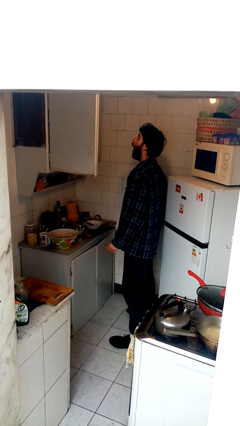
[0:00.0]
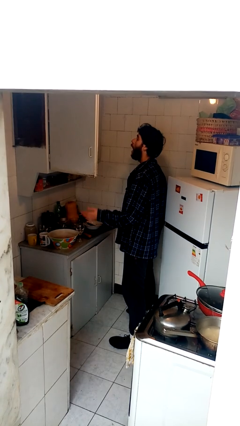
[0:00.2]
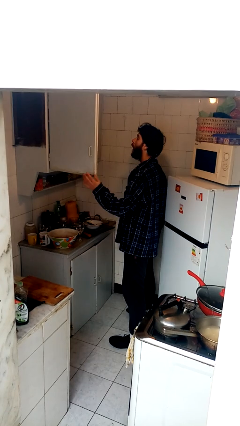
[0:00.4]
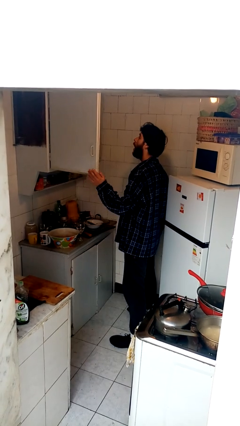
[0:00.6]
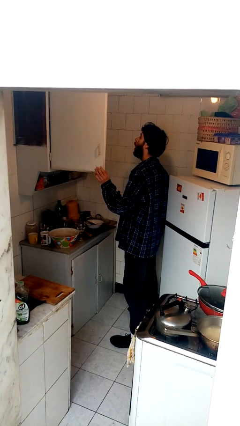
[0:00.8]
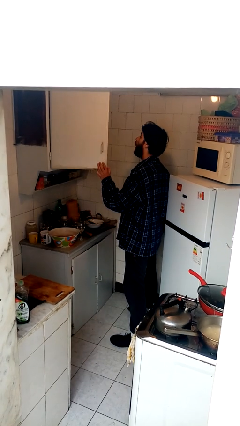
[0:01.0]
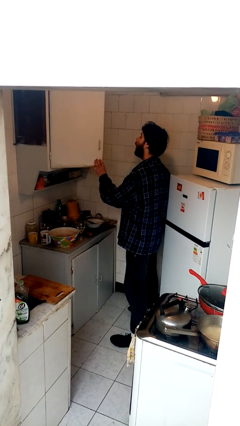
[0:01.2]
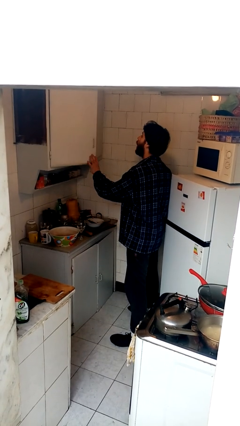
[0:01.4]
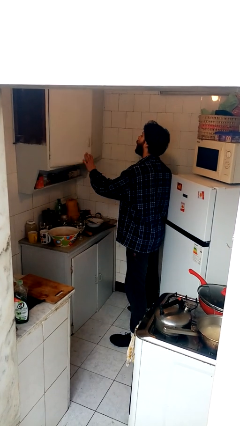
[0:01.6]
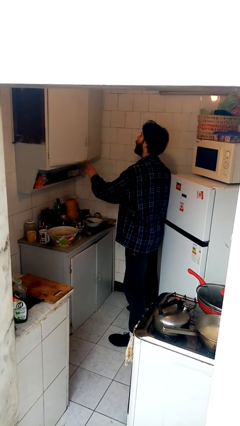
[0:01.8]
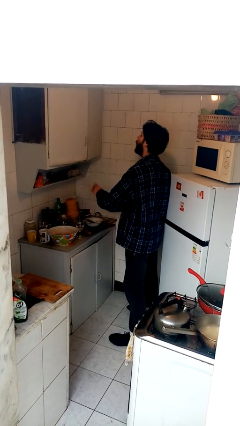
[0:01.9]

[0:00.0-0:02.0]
person closes cabinet

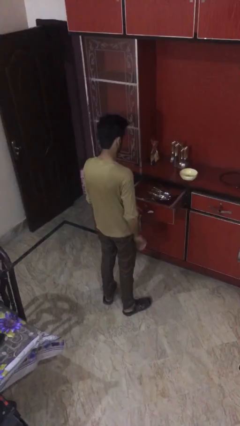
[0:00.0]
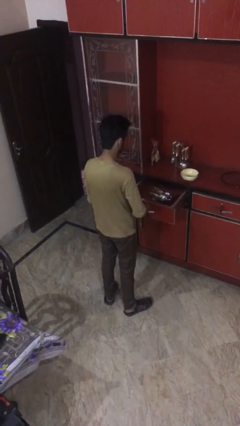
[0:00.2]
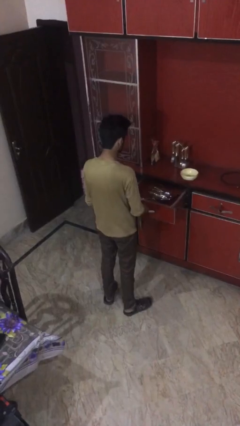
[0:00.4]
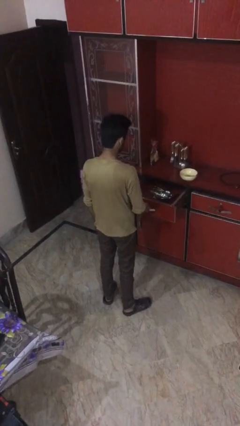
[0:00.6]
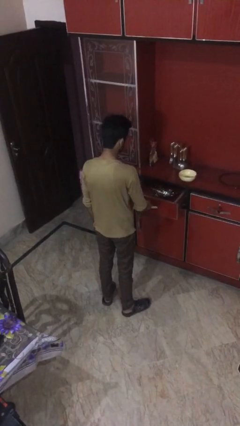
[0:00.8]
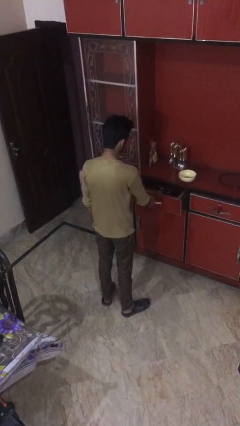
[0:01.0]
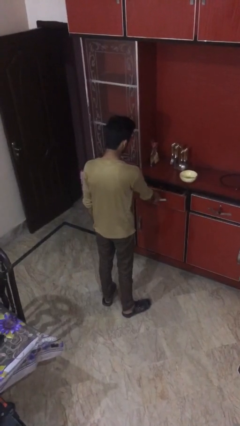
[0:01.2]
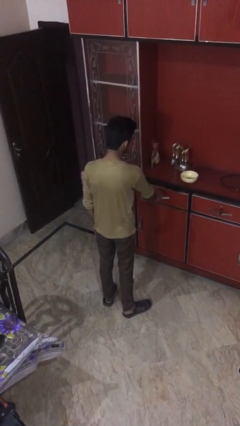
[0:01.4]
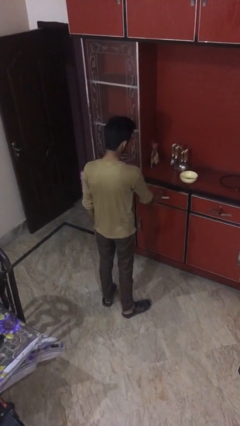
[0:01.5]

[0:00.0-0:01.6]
person closes kitchen drawer

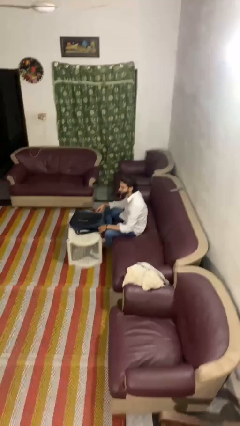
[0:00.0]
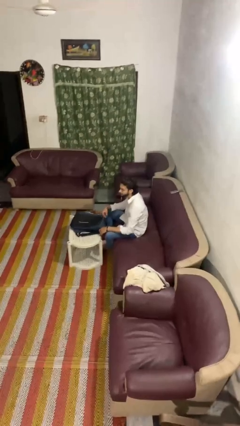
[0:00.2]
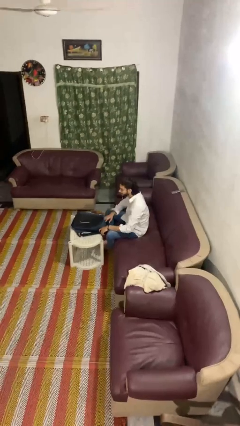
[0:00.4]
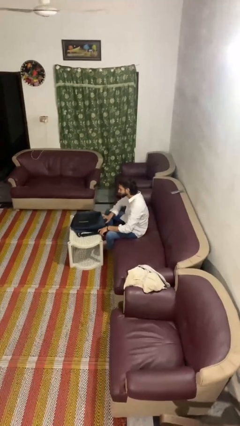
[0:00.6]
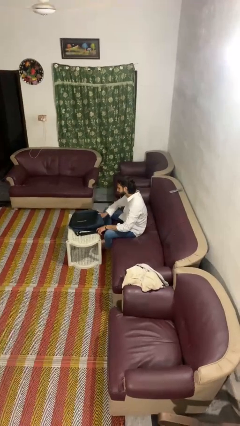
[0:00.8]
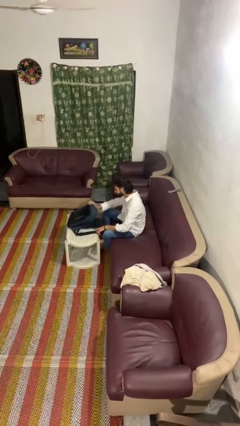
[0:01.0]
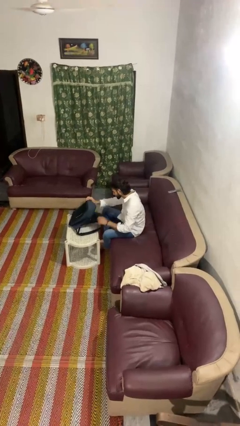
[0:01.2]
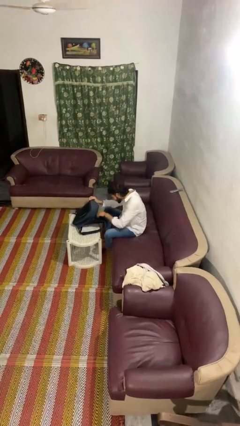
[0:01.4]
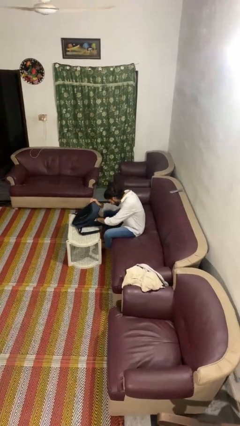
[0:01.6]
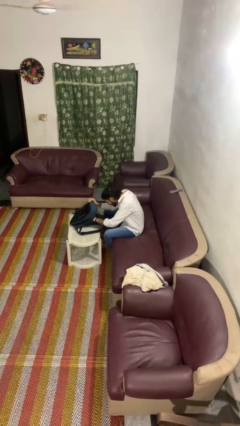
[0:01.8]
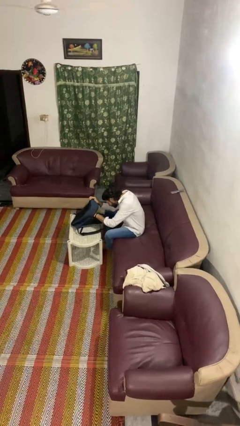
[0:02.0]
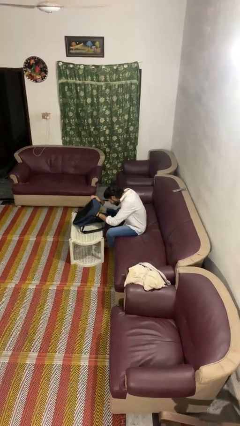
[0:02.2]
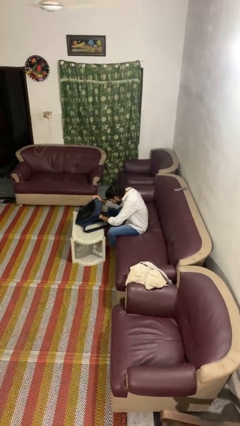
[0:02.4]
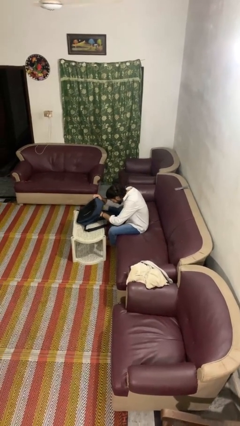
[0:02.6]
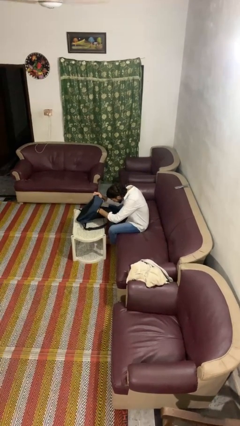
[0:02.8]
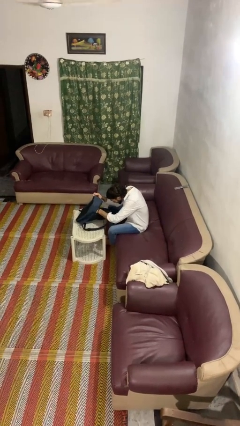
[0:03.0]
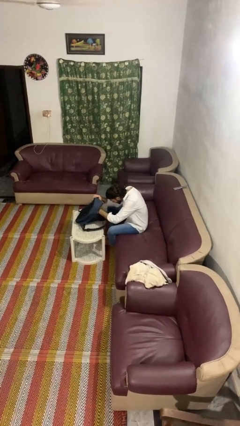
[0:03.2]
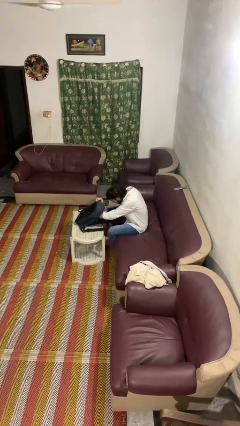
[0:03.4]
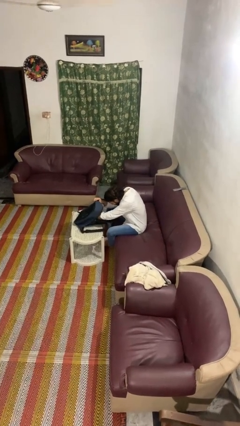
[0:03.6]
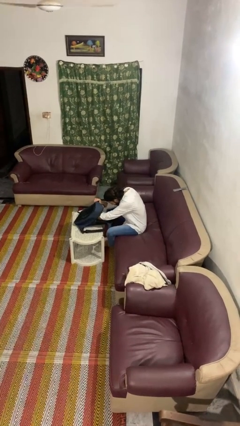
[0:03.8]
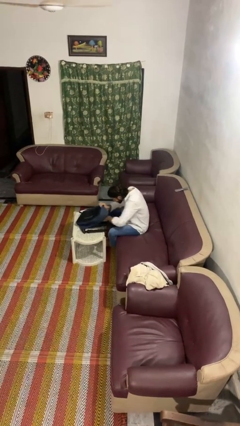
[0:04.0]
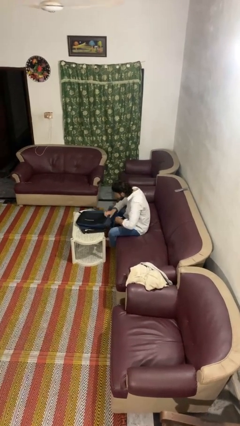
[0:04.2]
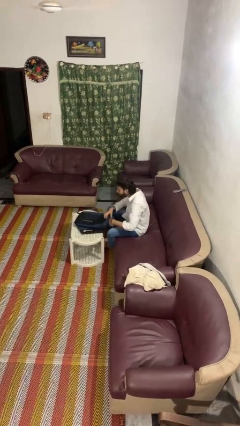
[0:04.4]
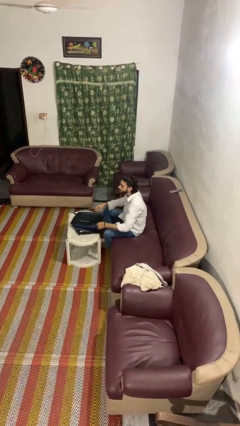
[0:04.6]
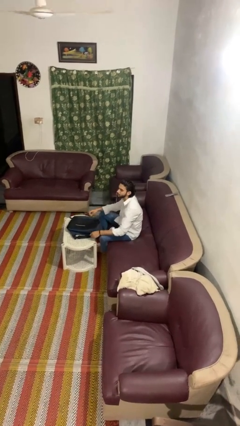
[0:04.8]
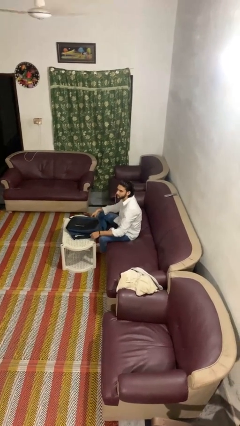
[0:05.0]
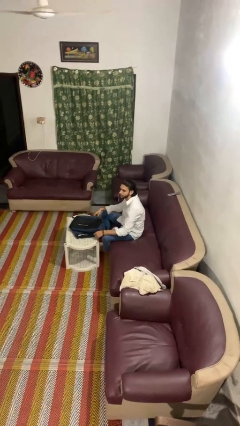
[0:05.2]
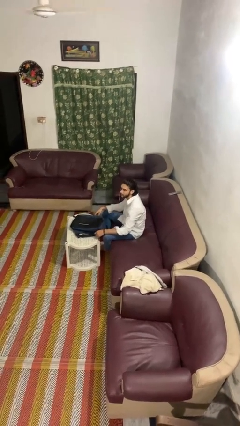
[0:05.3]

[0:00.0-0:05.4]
person searches in bag

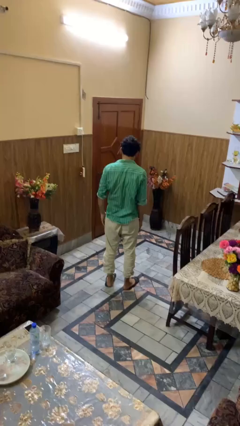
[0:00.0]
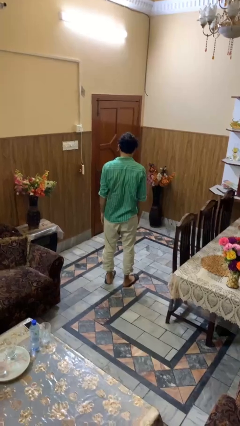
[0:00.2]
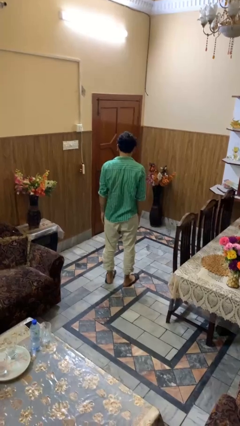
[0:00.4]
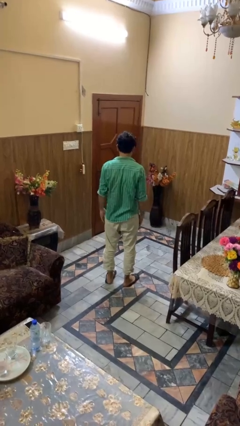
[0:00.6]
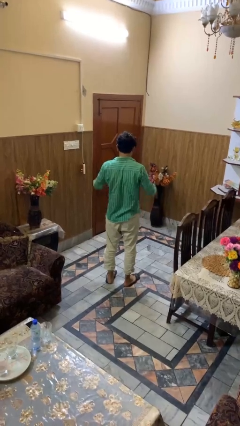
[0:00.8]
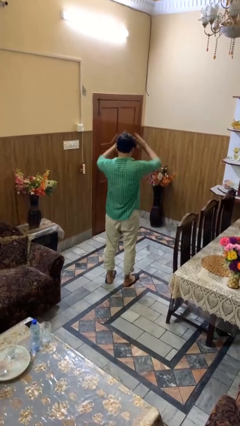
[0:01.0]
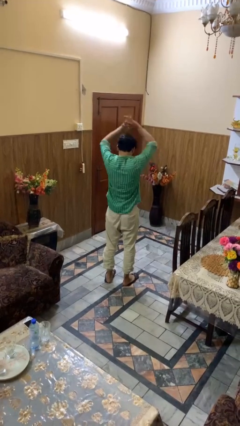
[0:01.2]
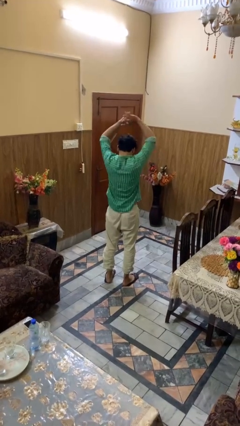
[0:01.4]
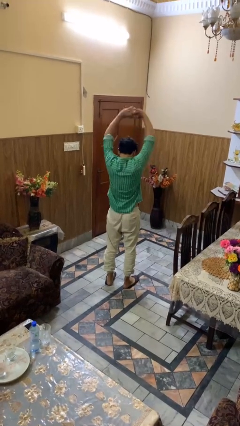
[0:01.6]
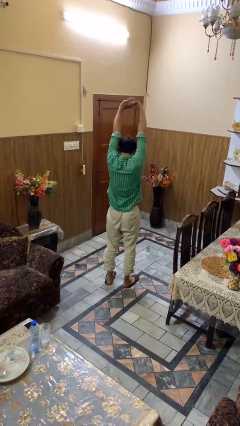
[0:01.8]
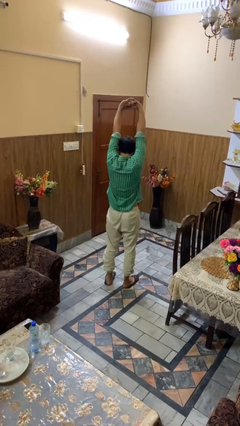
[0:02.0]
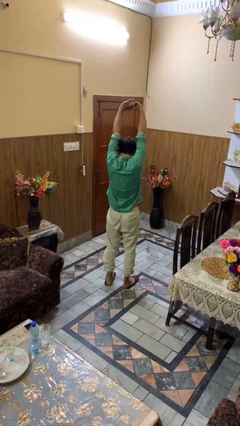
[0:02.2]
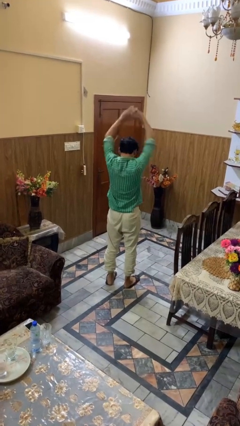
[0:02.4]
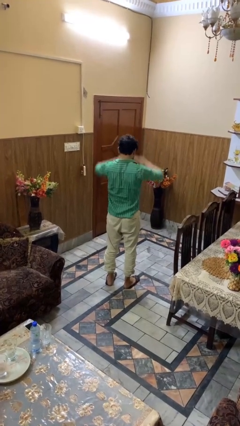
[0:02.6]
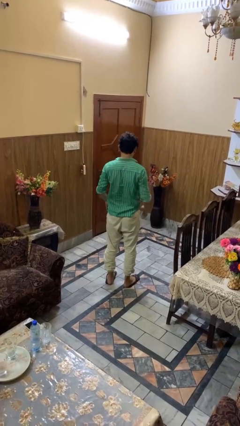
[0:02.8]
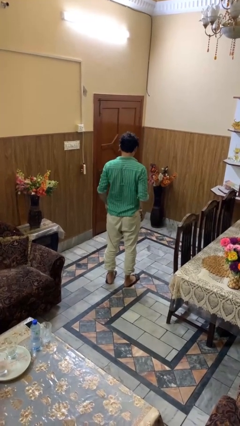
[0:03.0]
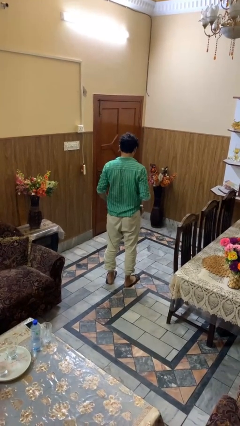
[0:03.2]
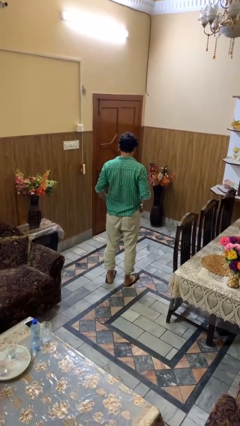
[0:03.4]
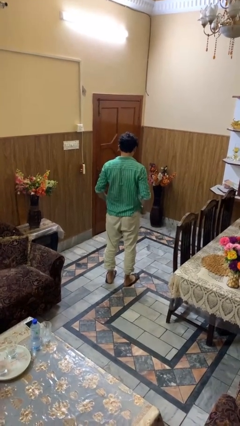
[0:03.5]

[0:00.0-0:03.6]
person stretches arms over head

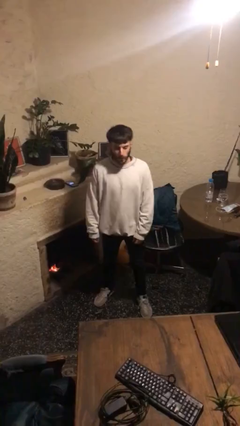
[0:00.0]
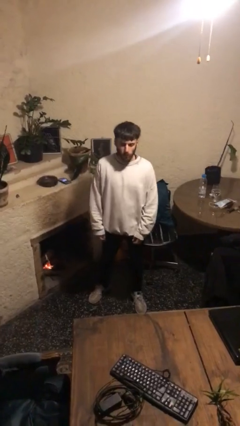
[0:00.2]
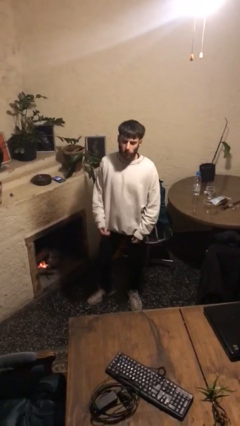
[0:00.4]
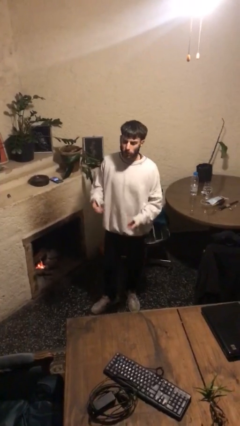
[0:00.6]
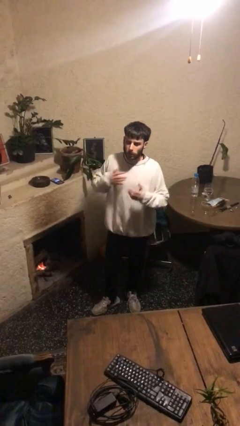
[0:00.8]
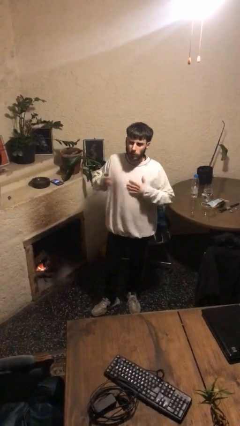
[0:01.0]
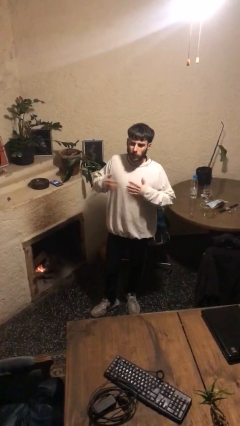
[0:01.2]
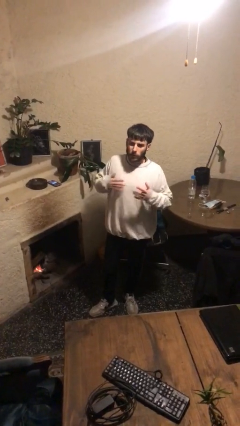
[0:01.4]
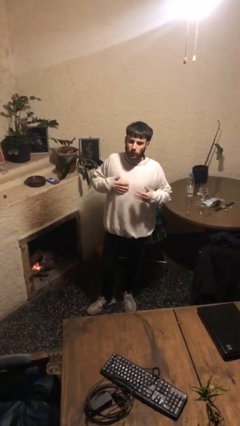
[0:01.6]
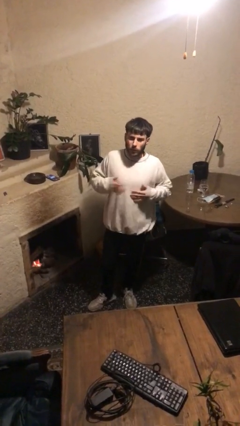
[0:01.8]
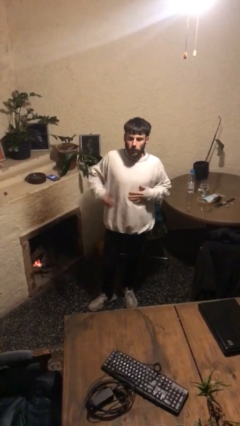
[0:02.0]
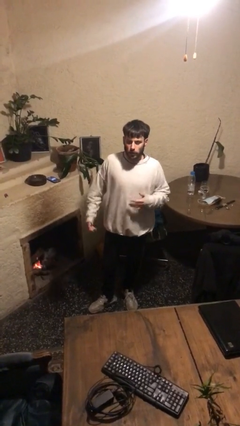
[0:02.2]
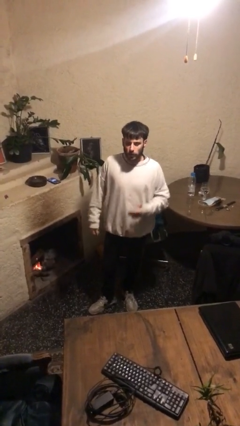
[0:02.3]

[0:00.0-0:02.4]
person drums on chest

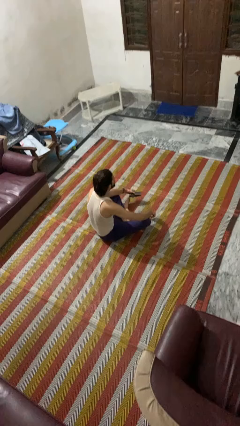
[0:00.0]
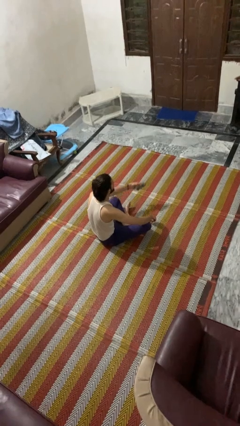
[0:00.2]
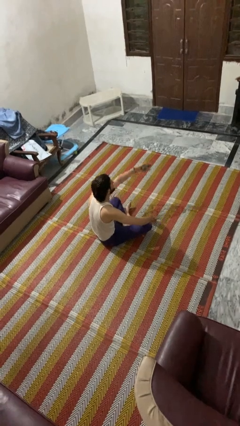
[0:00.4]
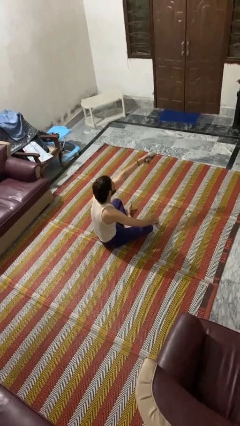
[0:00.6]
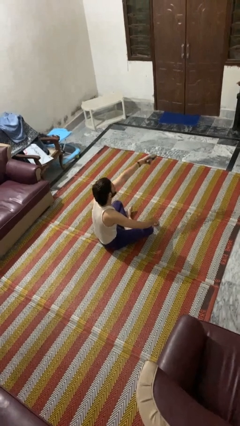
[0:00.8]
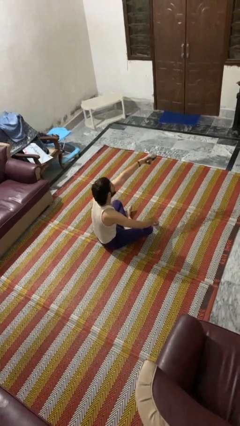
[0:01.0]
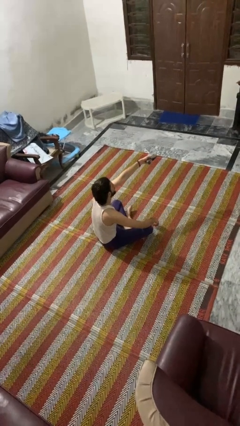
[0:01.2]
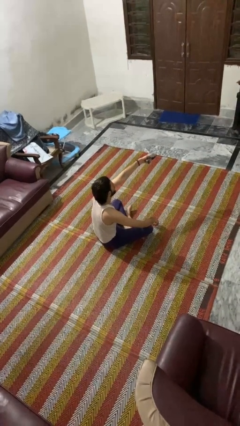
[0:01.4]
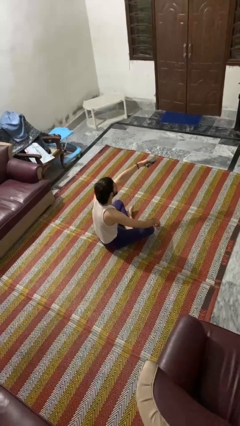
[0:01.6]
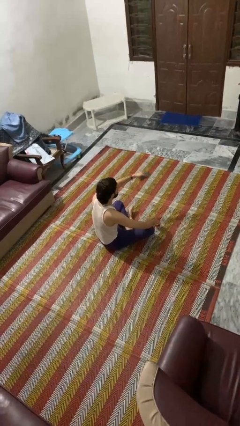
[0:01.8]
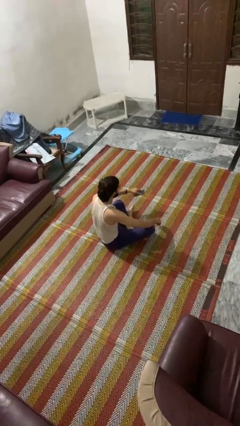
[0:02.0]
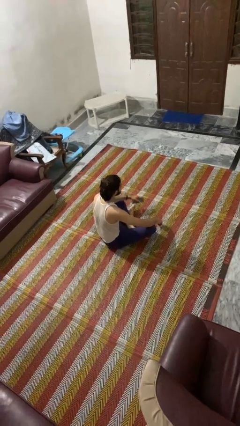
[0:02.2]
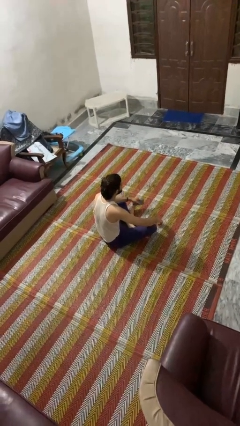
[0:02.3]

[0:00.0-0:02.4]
person uses television remote

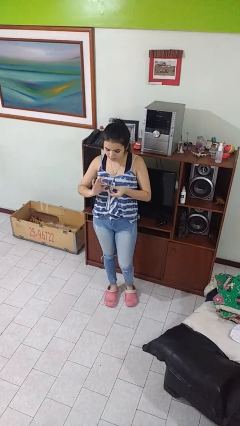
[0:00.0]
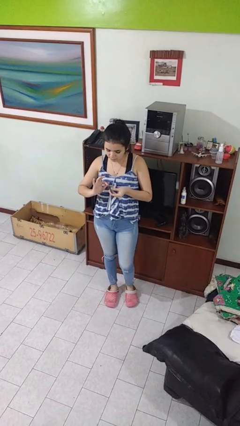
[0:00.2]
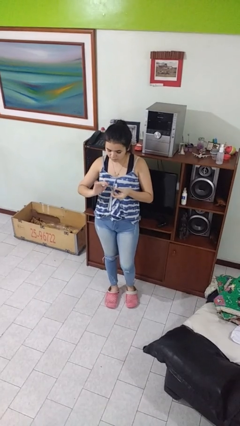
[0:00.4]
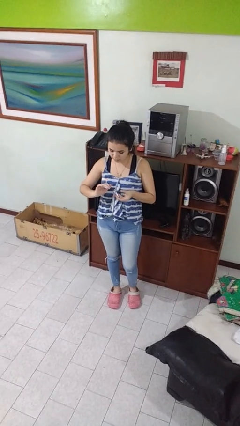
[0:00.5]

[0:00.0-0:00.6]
person clips fingernails
